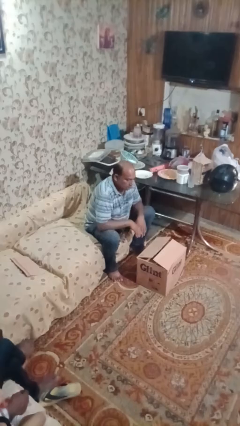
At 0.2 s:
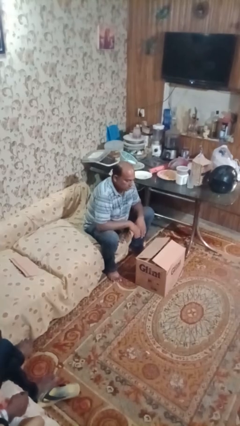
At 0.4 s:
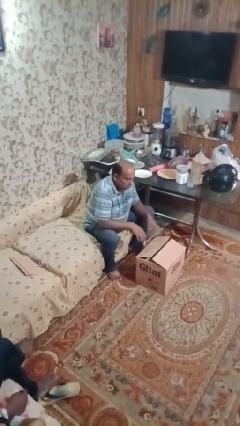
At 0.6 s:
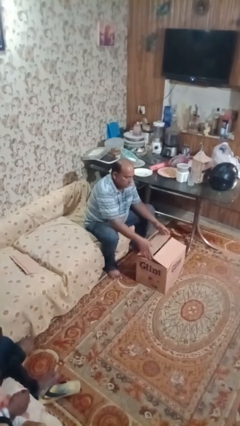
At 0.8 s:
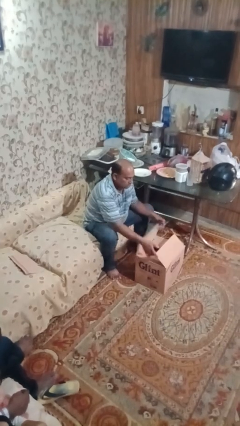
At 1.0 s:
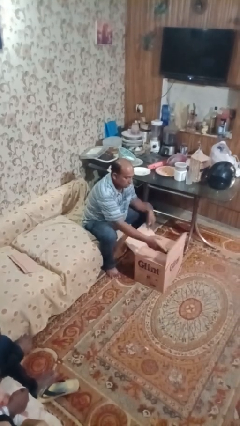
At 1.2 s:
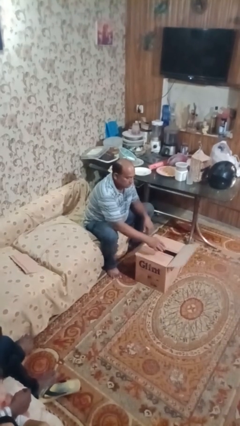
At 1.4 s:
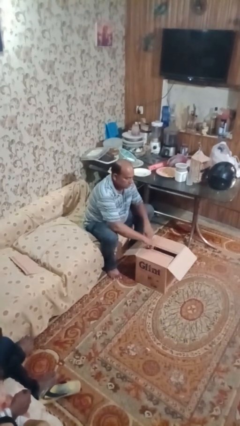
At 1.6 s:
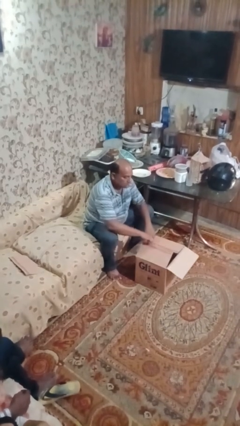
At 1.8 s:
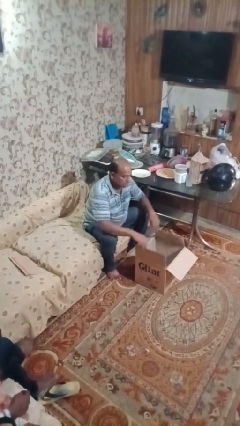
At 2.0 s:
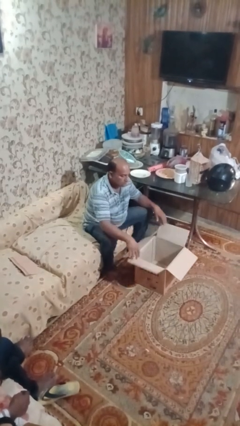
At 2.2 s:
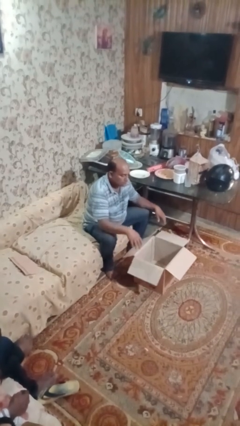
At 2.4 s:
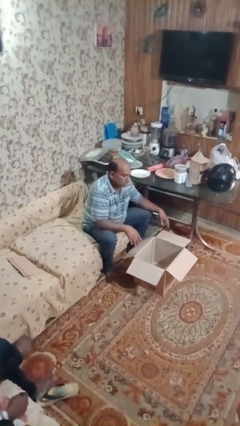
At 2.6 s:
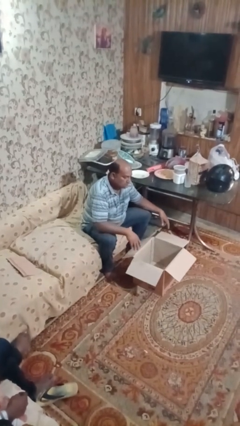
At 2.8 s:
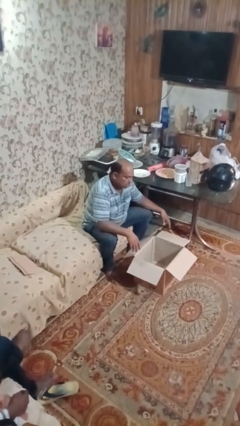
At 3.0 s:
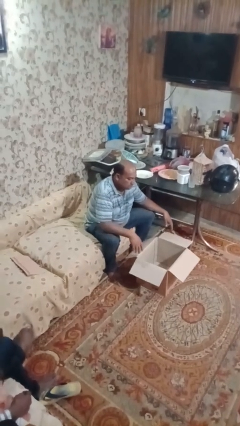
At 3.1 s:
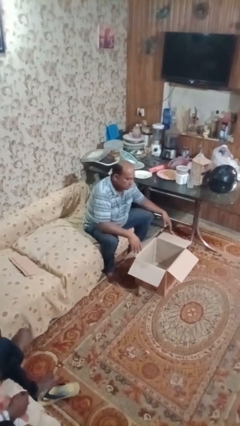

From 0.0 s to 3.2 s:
person opens box

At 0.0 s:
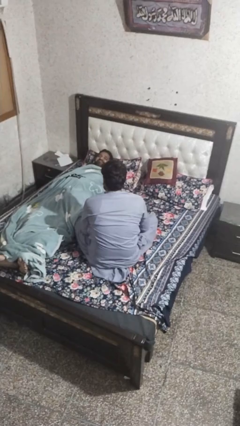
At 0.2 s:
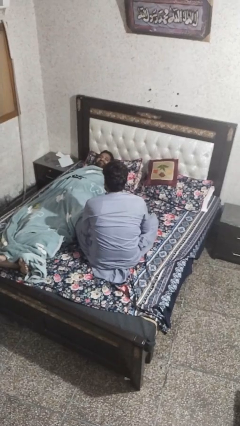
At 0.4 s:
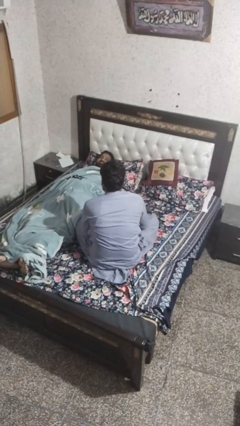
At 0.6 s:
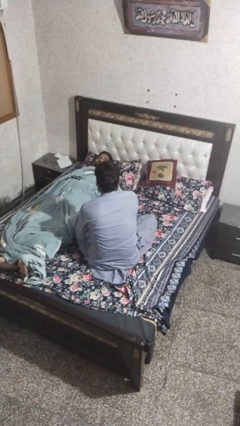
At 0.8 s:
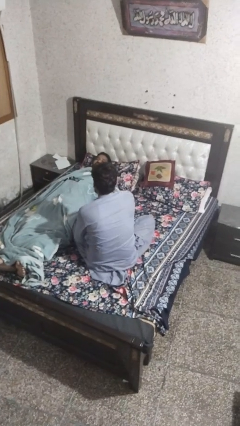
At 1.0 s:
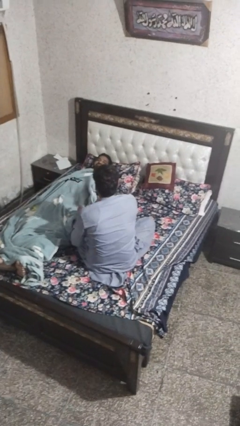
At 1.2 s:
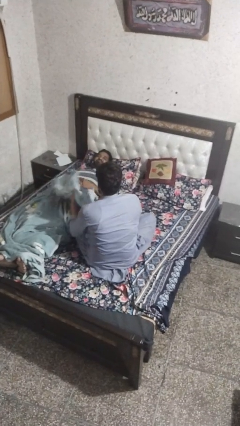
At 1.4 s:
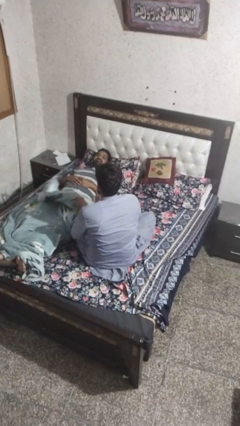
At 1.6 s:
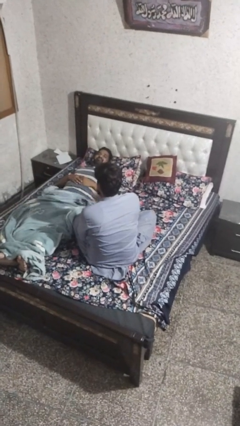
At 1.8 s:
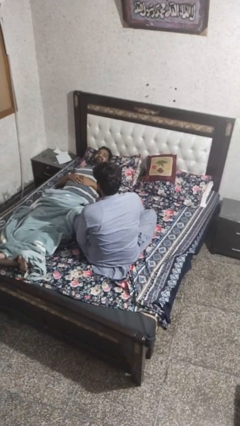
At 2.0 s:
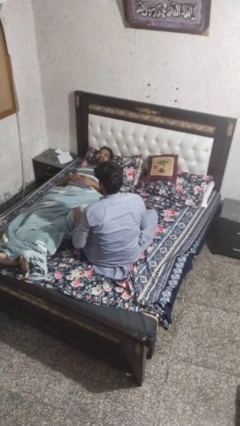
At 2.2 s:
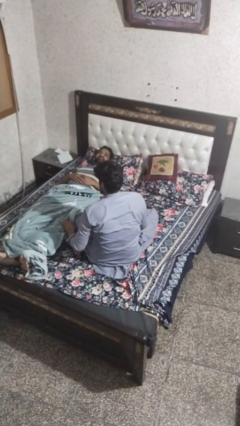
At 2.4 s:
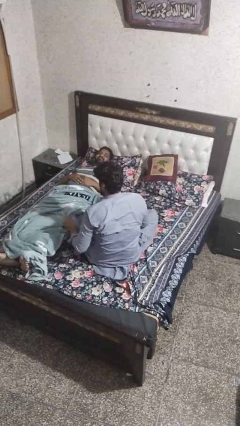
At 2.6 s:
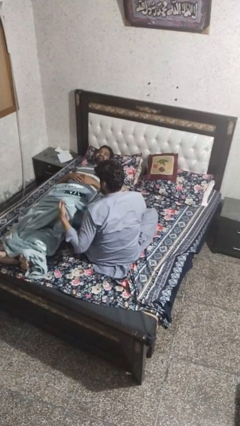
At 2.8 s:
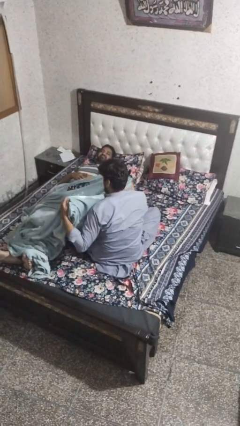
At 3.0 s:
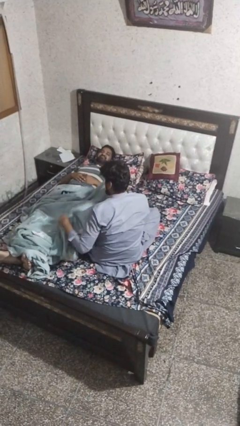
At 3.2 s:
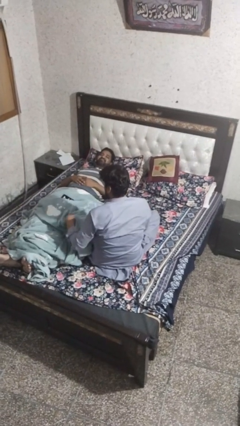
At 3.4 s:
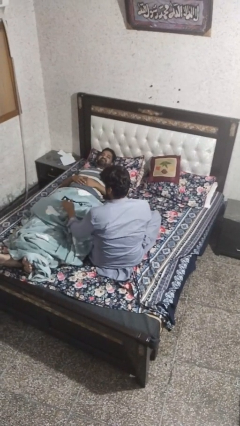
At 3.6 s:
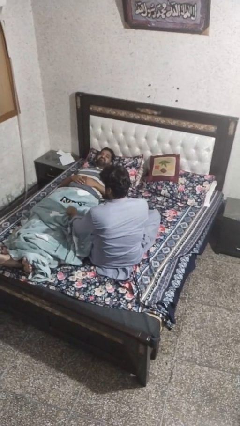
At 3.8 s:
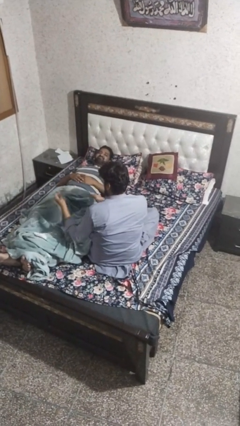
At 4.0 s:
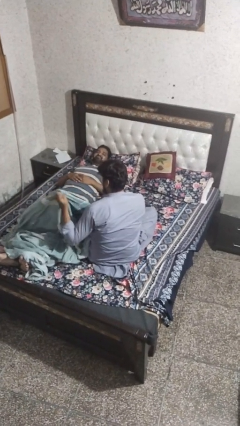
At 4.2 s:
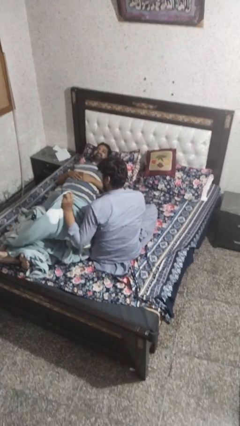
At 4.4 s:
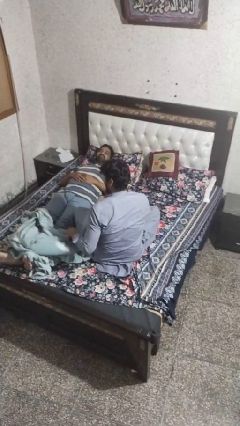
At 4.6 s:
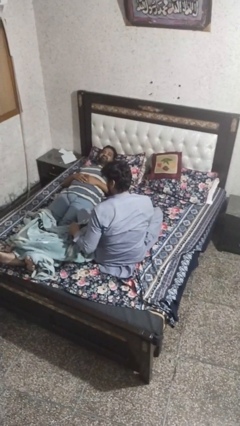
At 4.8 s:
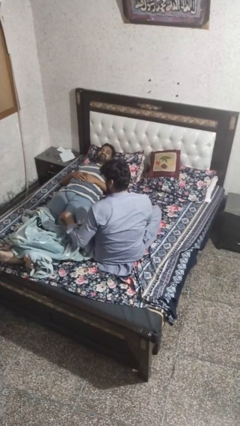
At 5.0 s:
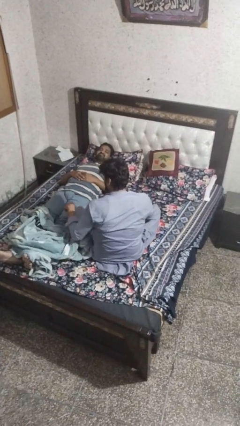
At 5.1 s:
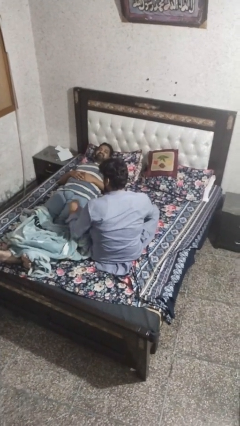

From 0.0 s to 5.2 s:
person uncovers friend with blanket

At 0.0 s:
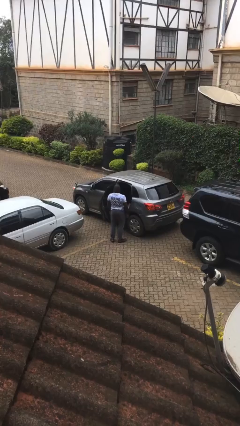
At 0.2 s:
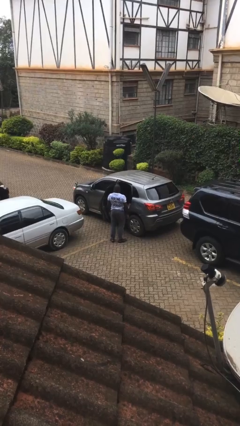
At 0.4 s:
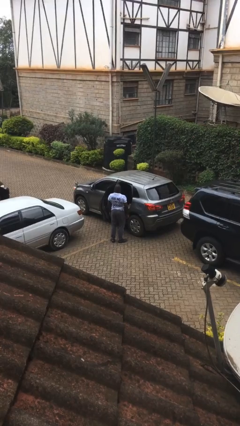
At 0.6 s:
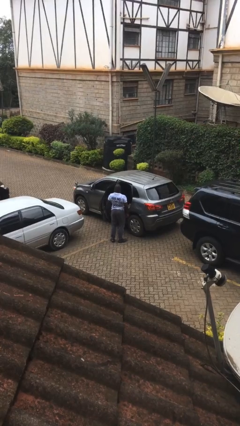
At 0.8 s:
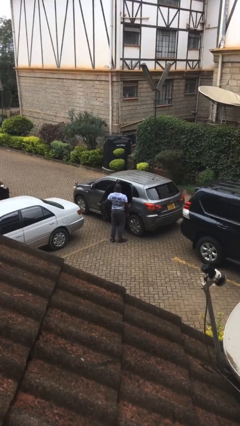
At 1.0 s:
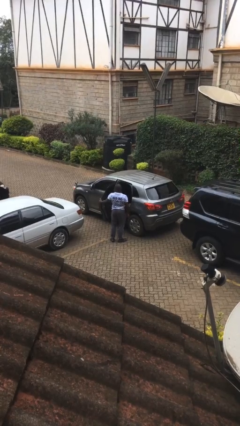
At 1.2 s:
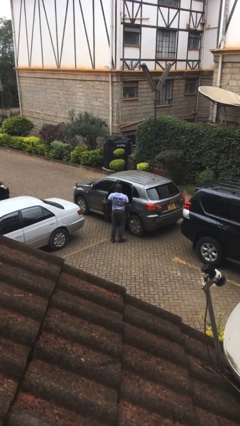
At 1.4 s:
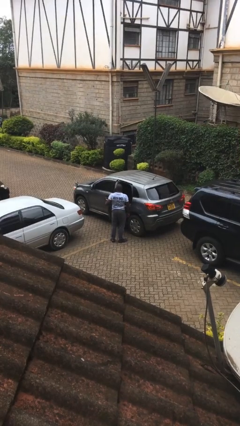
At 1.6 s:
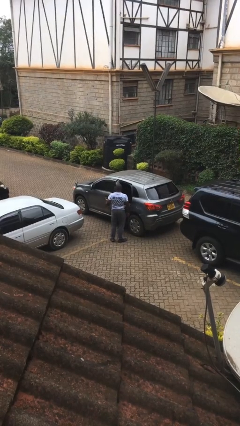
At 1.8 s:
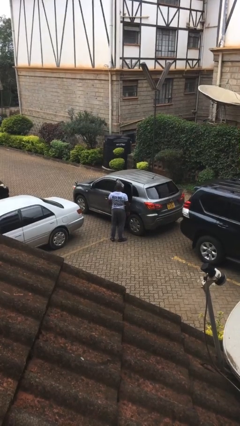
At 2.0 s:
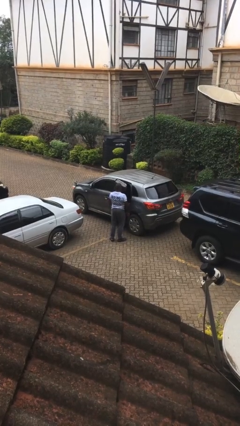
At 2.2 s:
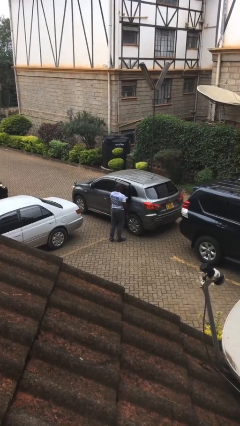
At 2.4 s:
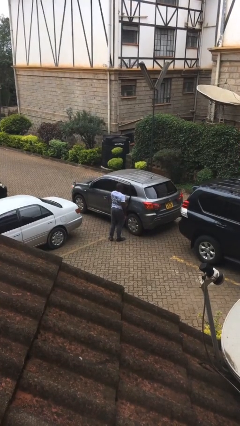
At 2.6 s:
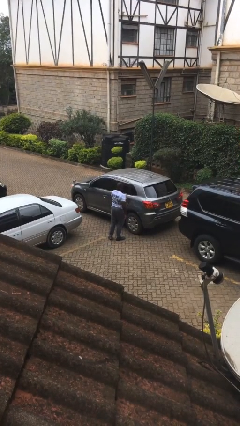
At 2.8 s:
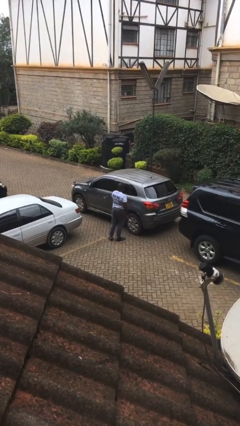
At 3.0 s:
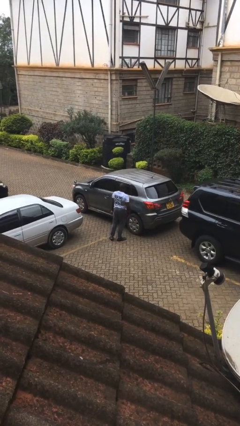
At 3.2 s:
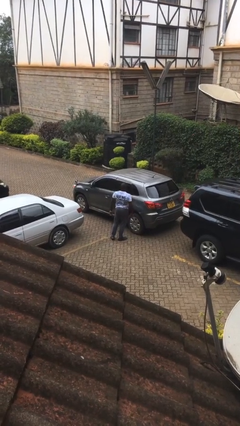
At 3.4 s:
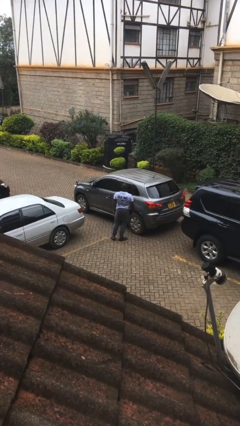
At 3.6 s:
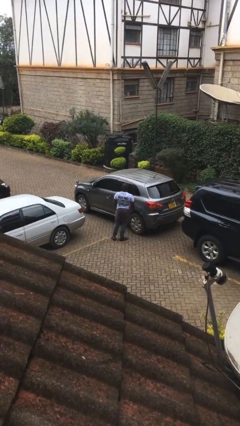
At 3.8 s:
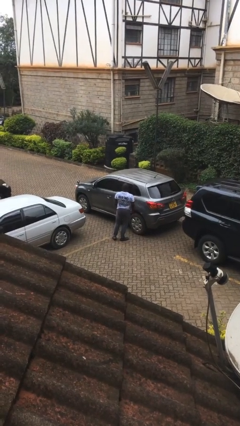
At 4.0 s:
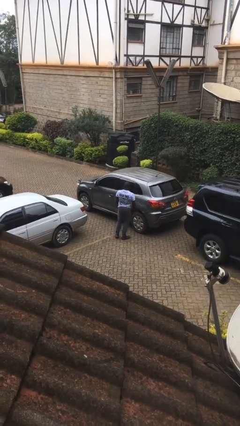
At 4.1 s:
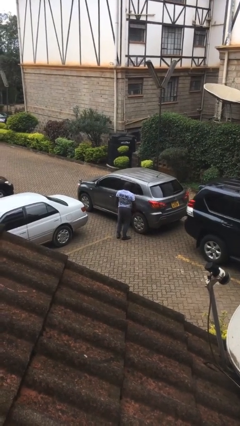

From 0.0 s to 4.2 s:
person closes car door

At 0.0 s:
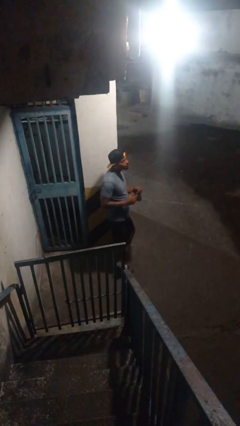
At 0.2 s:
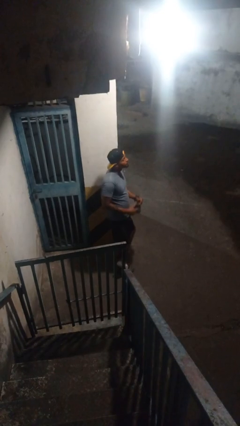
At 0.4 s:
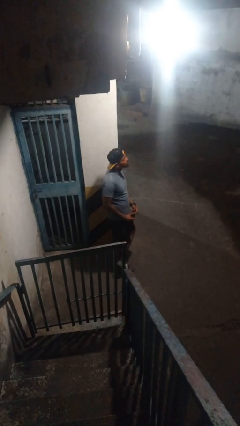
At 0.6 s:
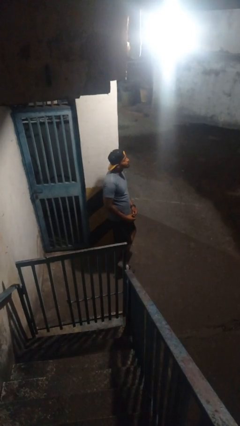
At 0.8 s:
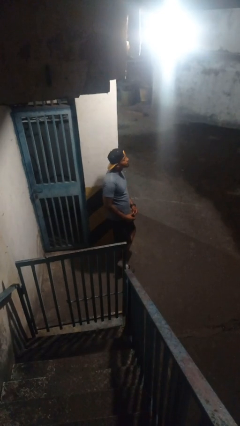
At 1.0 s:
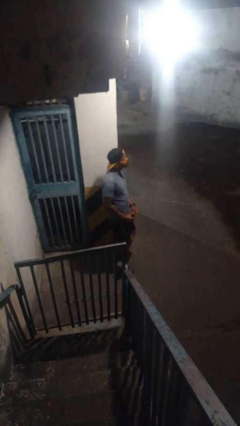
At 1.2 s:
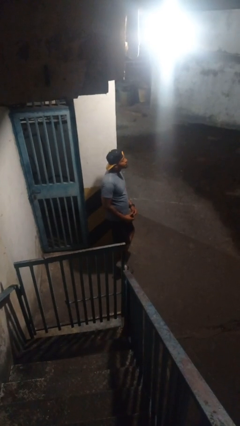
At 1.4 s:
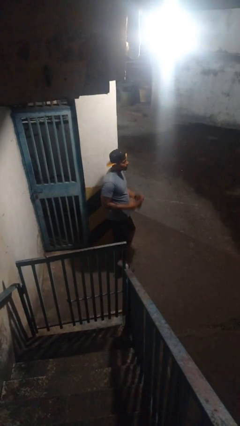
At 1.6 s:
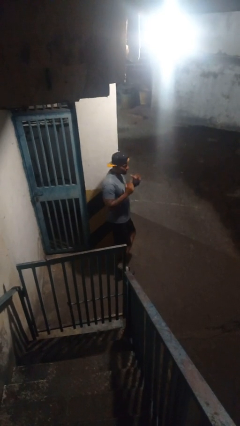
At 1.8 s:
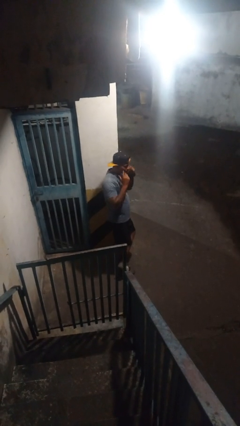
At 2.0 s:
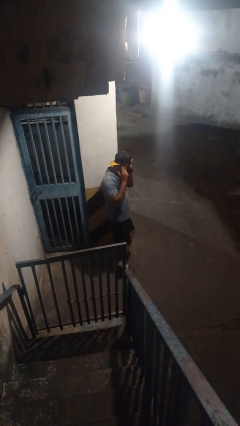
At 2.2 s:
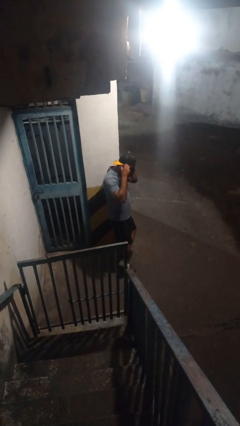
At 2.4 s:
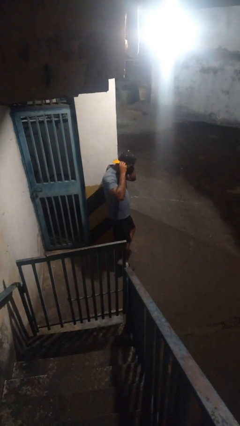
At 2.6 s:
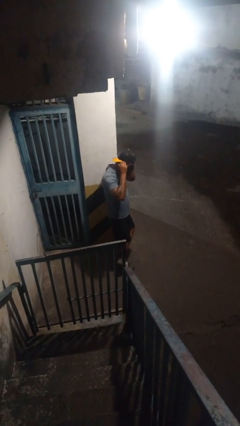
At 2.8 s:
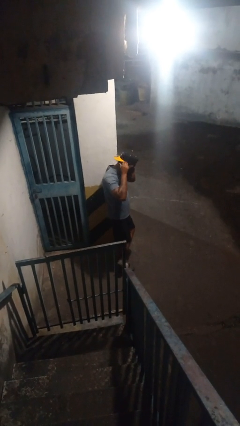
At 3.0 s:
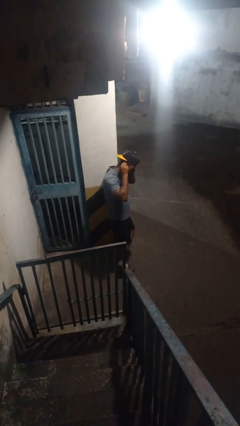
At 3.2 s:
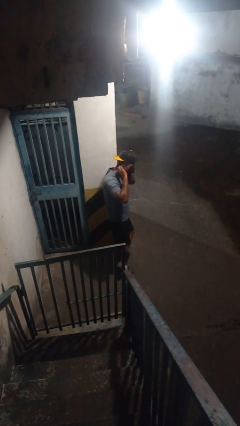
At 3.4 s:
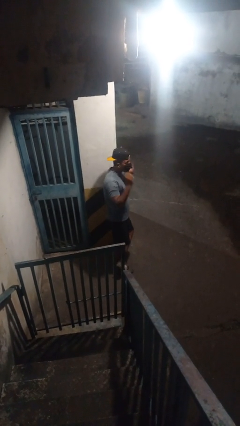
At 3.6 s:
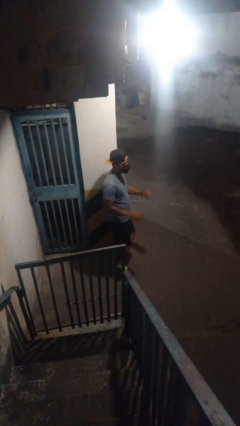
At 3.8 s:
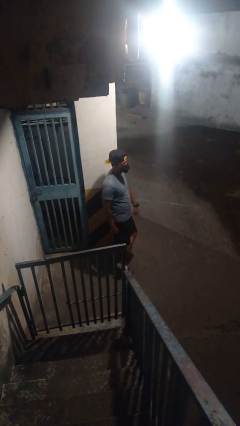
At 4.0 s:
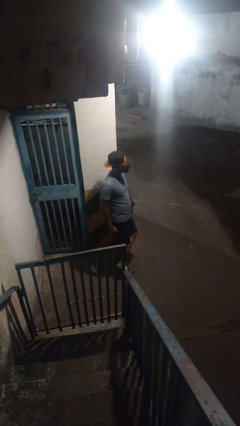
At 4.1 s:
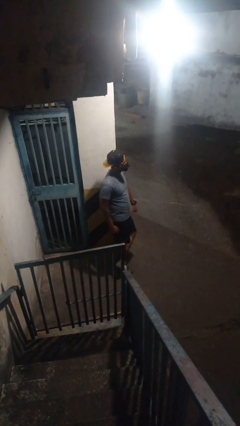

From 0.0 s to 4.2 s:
person puts on facemask

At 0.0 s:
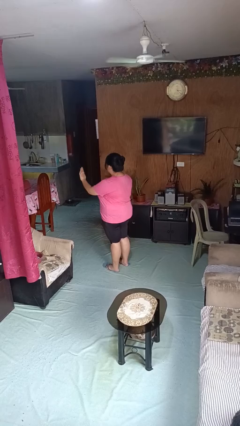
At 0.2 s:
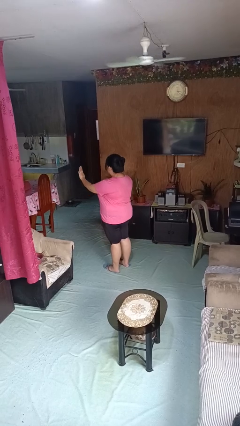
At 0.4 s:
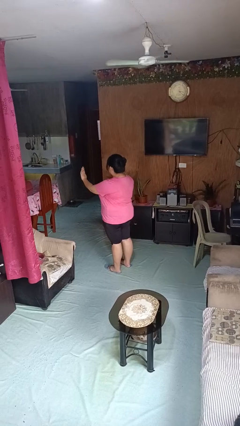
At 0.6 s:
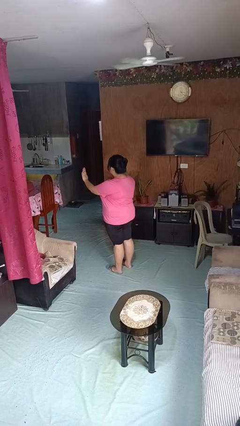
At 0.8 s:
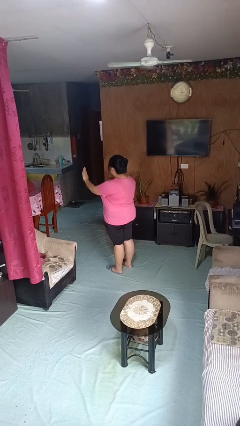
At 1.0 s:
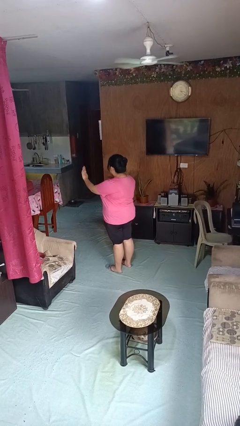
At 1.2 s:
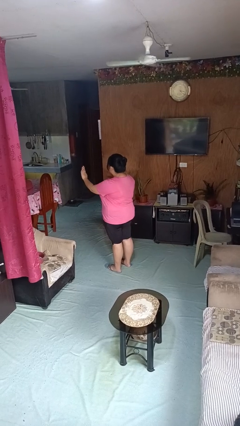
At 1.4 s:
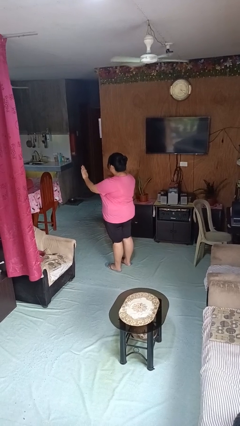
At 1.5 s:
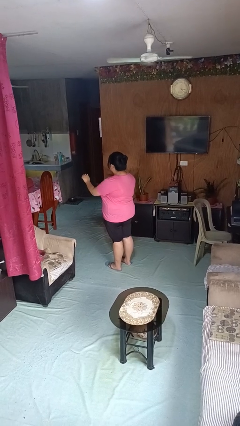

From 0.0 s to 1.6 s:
person gestures stop
